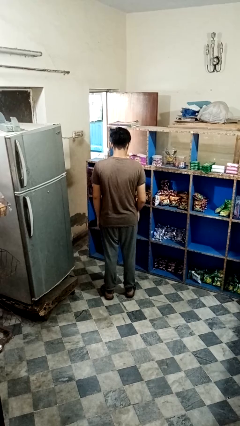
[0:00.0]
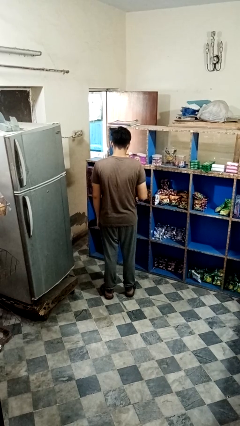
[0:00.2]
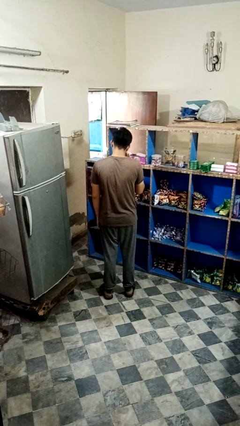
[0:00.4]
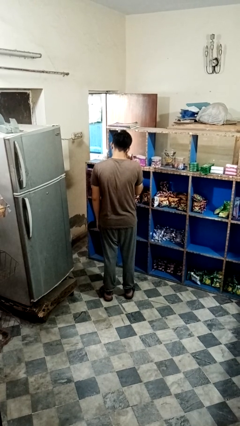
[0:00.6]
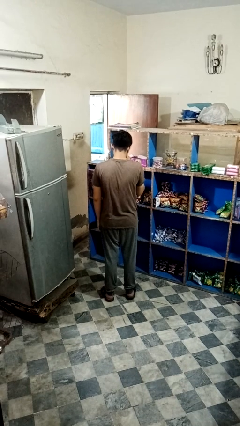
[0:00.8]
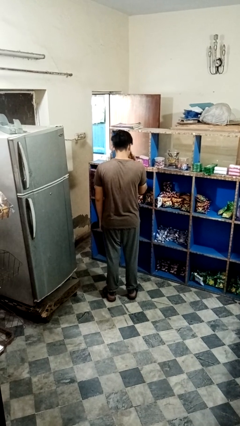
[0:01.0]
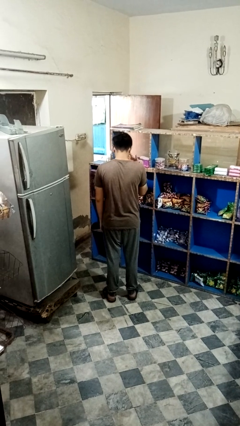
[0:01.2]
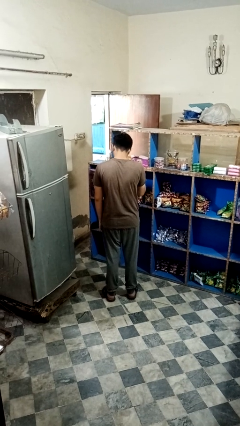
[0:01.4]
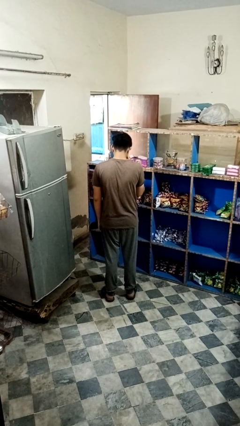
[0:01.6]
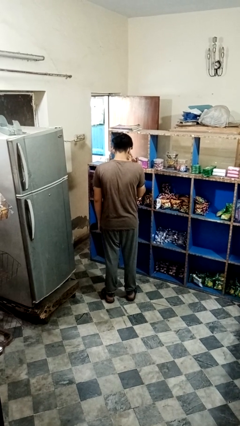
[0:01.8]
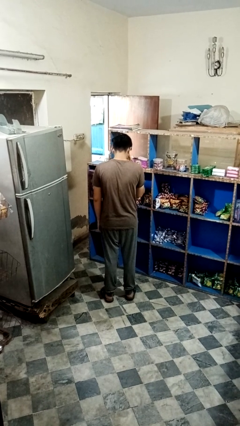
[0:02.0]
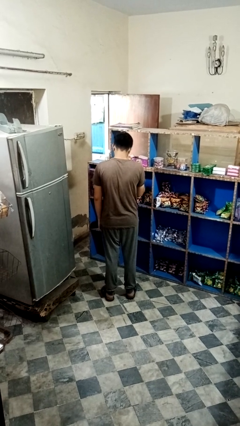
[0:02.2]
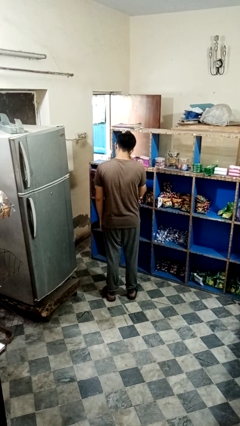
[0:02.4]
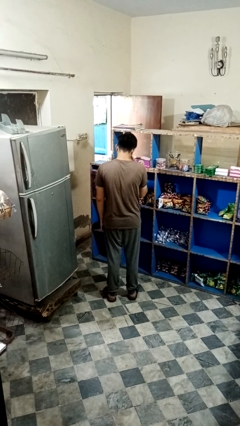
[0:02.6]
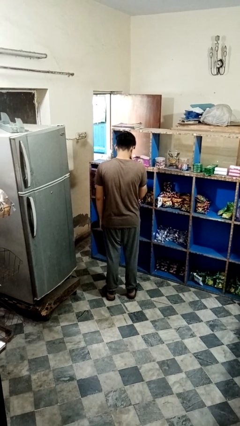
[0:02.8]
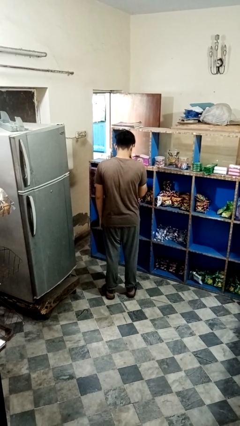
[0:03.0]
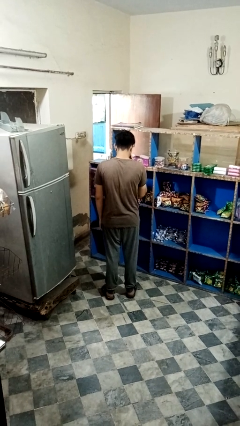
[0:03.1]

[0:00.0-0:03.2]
person rubs eyes

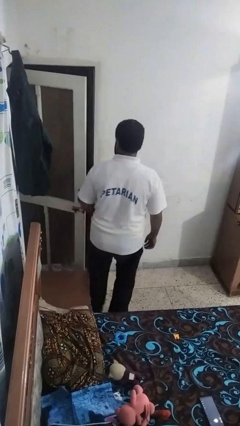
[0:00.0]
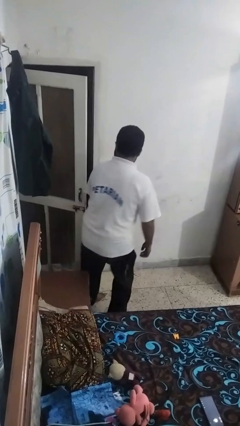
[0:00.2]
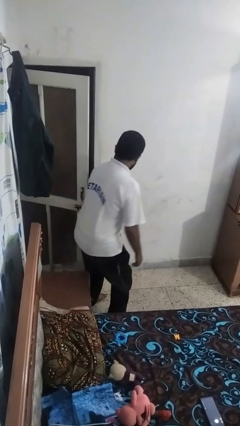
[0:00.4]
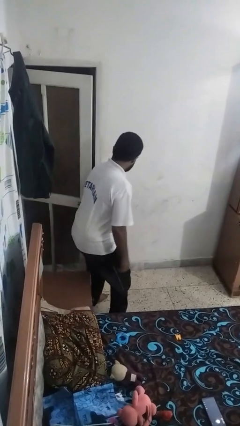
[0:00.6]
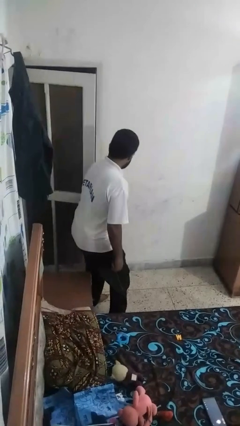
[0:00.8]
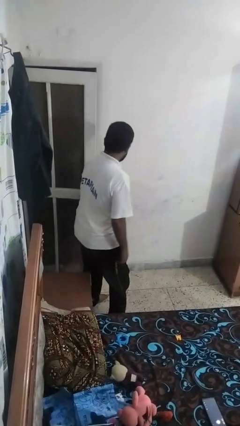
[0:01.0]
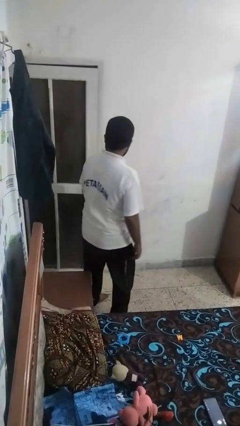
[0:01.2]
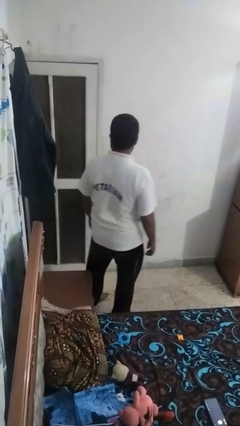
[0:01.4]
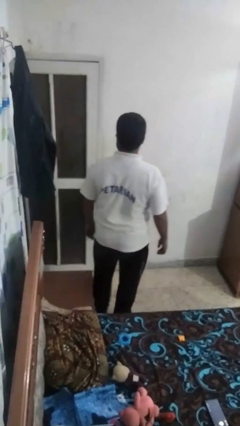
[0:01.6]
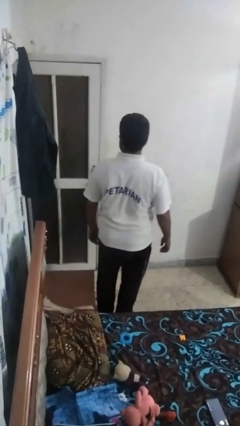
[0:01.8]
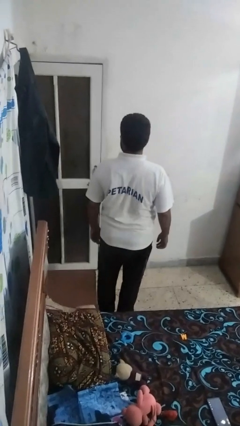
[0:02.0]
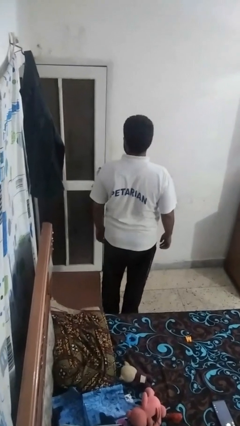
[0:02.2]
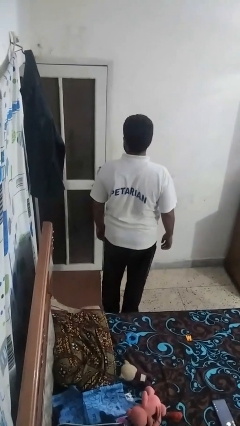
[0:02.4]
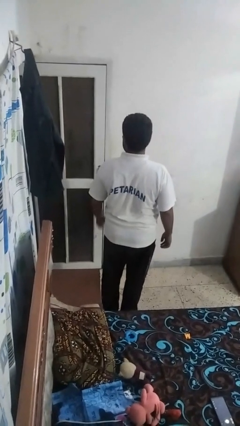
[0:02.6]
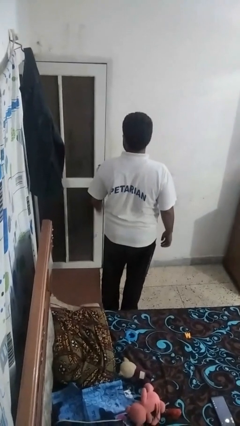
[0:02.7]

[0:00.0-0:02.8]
person closes door with hip

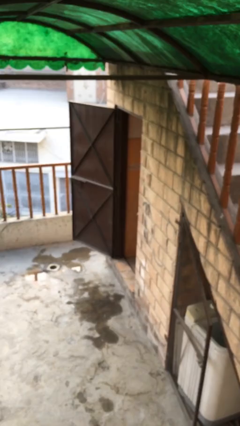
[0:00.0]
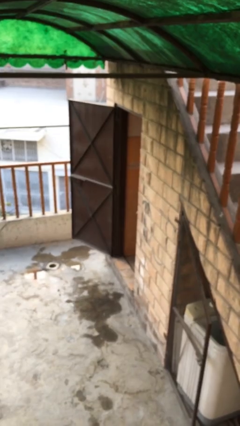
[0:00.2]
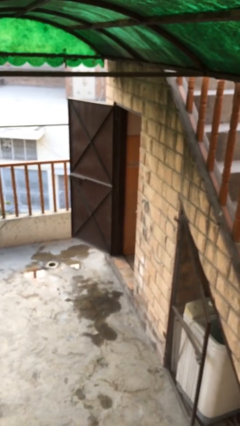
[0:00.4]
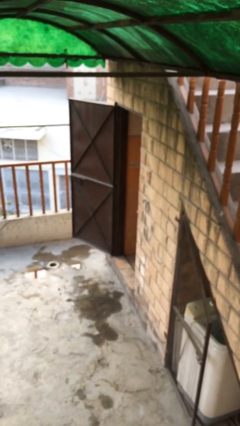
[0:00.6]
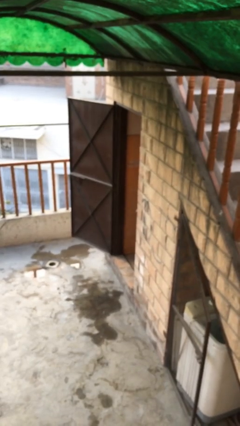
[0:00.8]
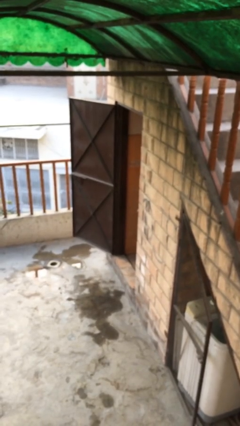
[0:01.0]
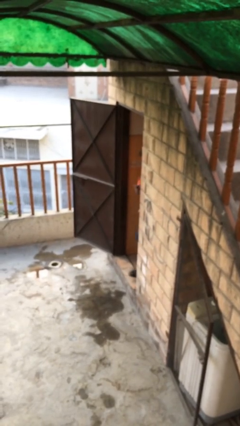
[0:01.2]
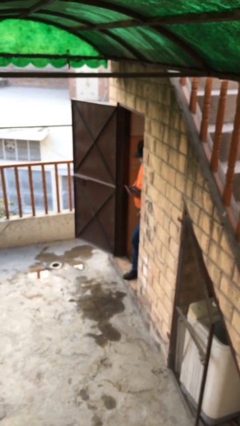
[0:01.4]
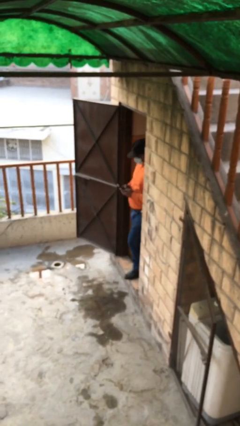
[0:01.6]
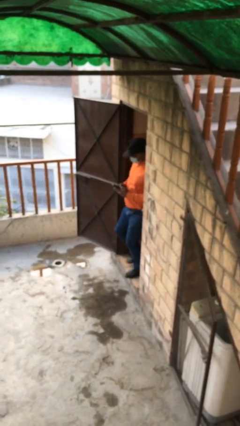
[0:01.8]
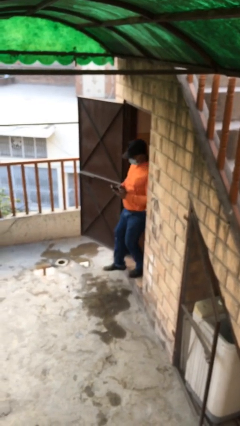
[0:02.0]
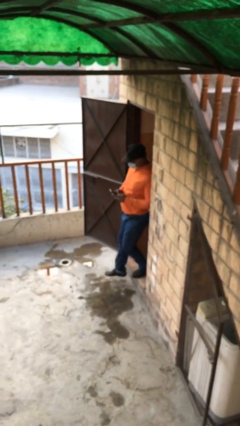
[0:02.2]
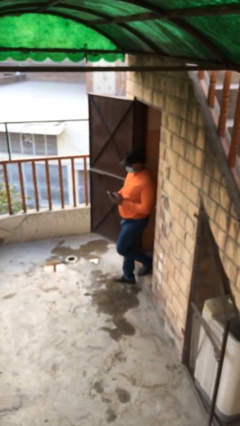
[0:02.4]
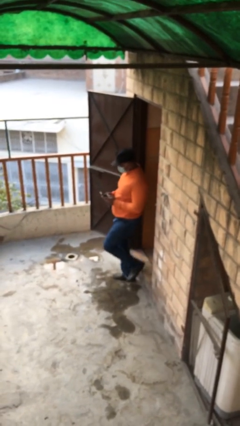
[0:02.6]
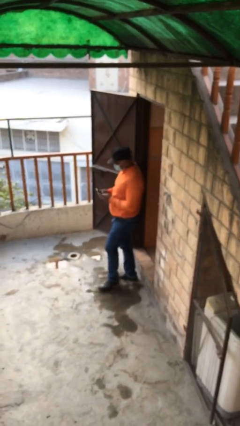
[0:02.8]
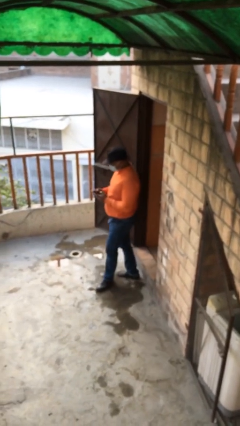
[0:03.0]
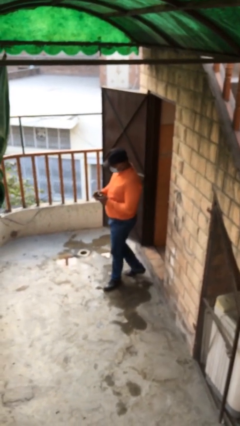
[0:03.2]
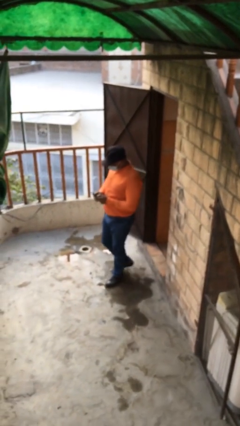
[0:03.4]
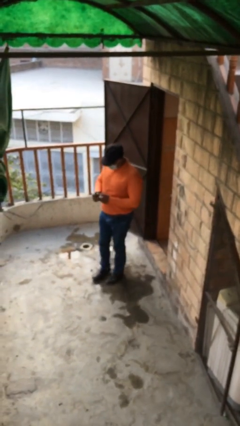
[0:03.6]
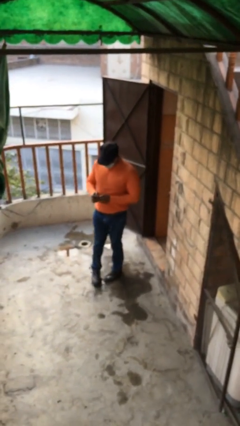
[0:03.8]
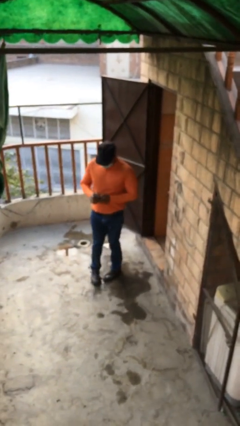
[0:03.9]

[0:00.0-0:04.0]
person exits scene through structure

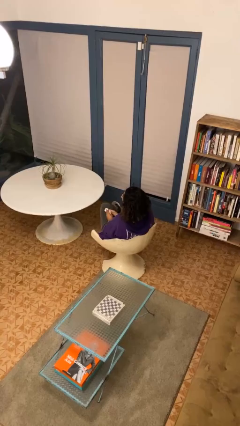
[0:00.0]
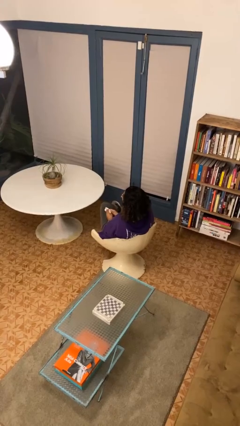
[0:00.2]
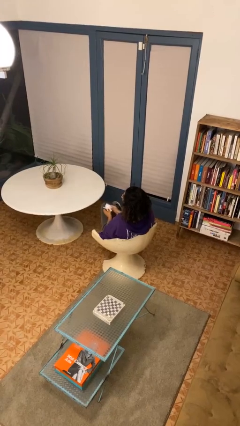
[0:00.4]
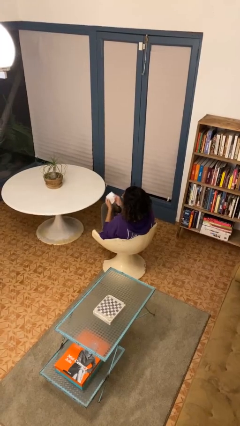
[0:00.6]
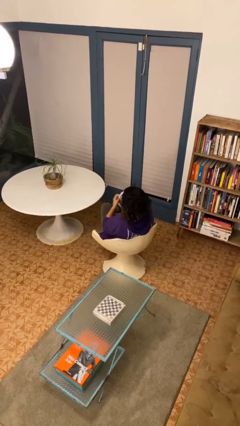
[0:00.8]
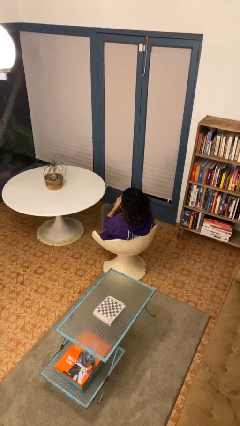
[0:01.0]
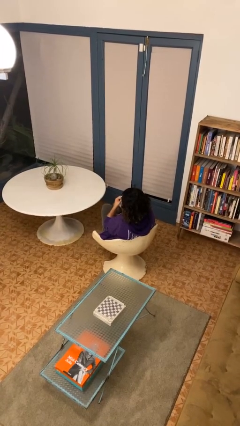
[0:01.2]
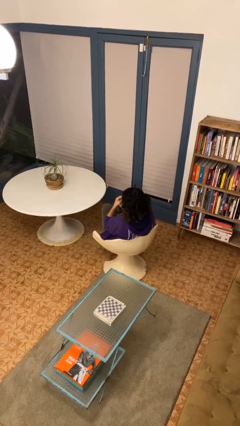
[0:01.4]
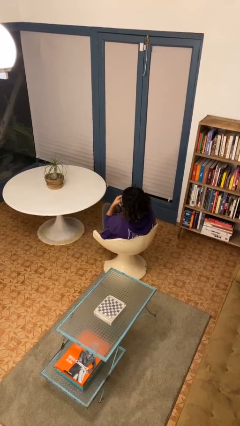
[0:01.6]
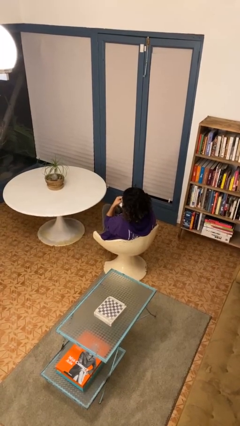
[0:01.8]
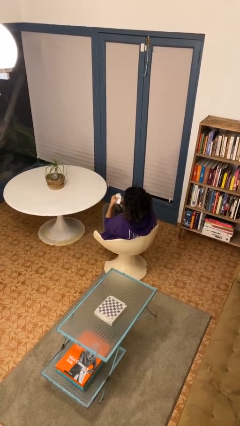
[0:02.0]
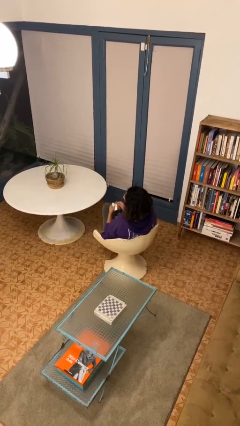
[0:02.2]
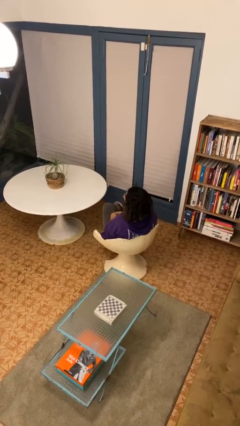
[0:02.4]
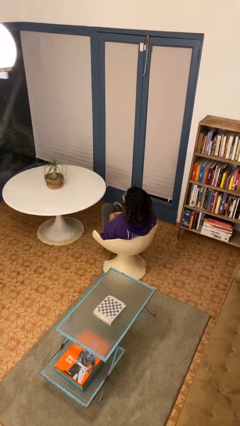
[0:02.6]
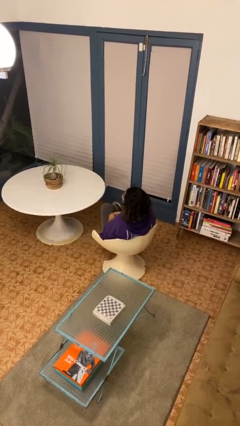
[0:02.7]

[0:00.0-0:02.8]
person blows nose

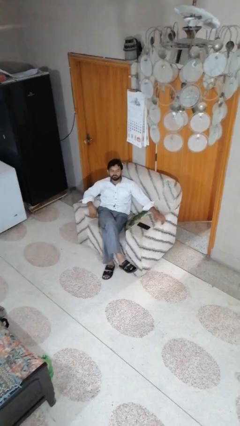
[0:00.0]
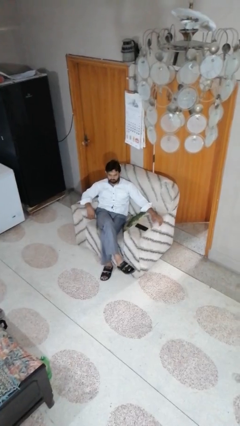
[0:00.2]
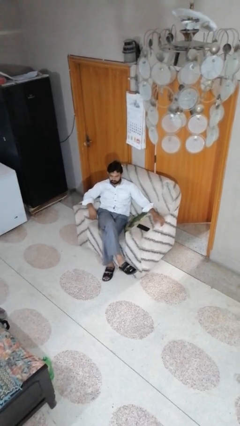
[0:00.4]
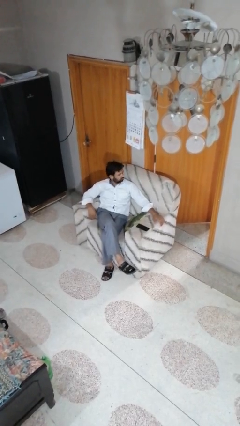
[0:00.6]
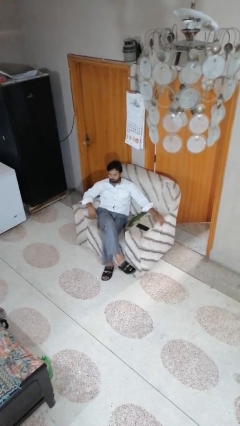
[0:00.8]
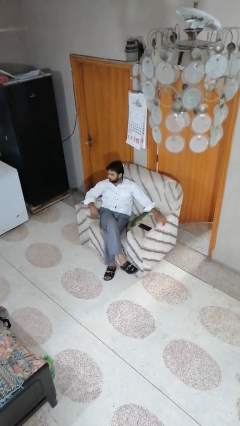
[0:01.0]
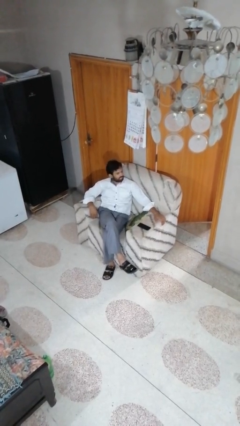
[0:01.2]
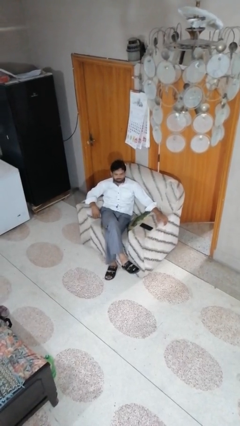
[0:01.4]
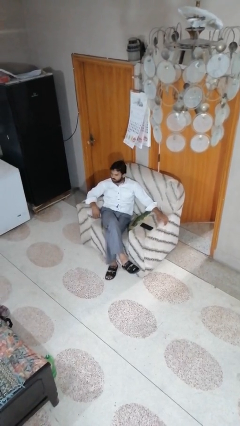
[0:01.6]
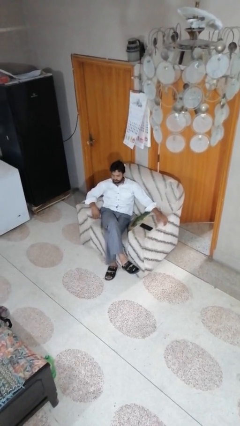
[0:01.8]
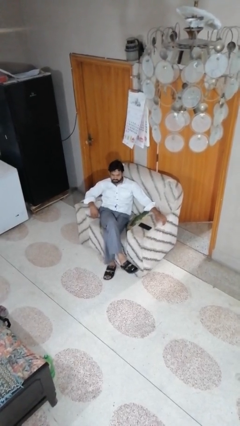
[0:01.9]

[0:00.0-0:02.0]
person shakes head

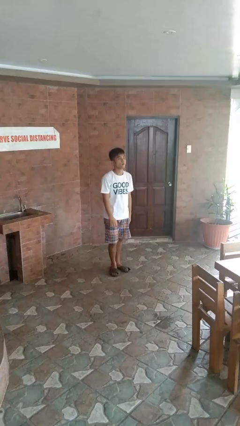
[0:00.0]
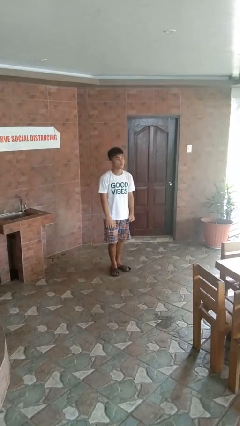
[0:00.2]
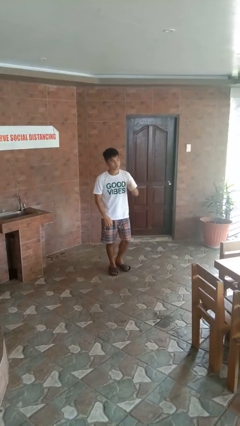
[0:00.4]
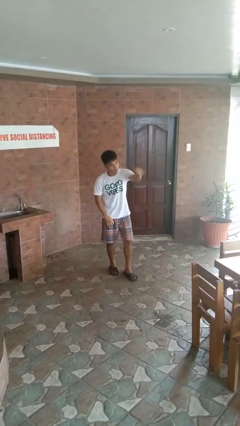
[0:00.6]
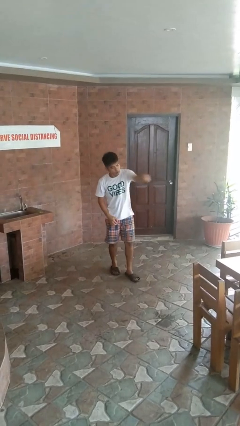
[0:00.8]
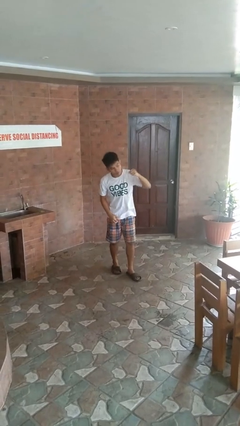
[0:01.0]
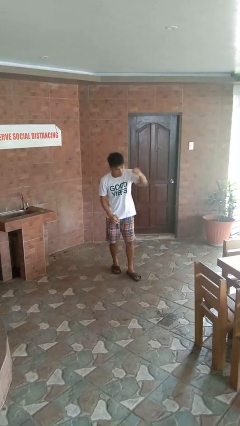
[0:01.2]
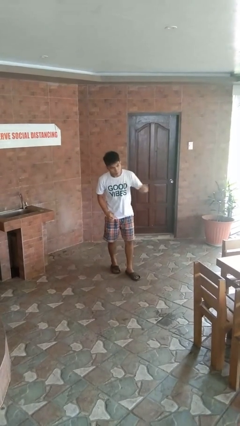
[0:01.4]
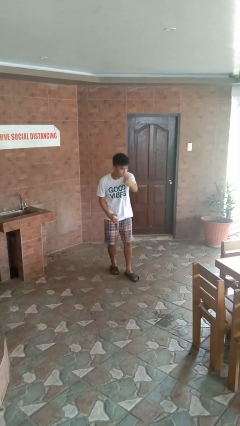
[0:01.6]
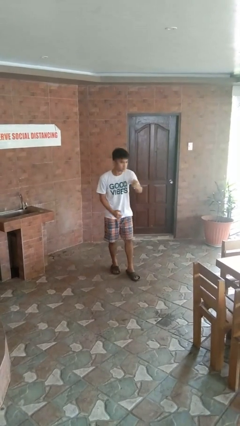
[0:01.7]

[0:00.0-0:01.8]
person punches

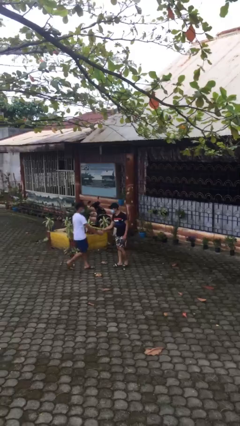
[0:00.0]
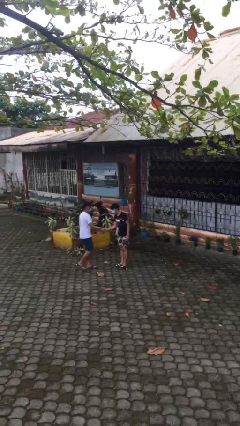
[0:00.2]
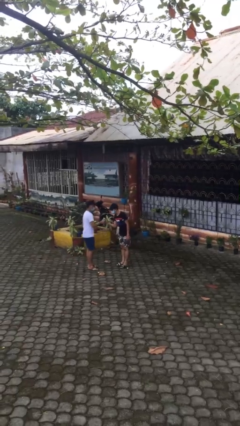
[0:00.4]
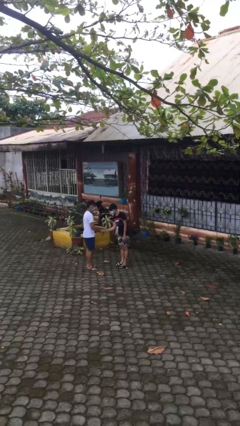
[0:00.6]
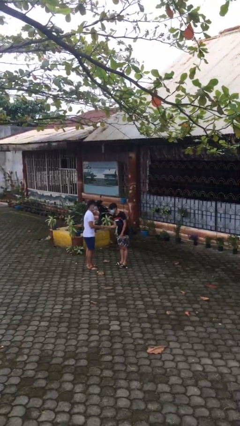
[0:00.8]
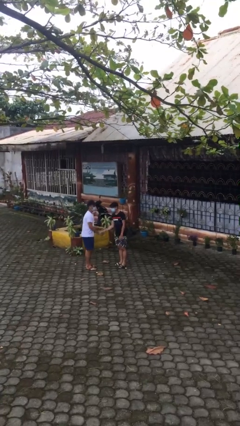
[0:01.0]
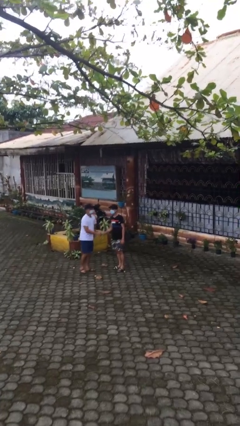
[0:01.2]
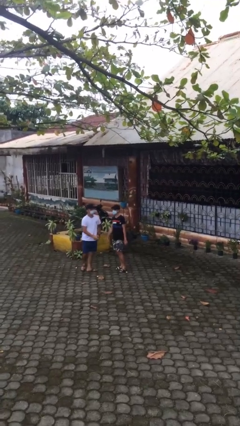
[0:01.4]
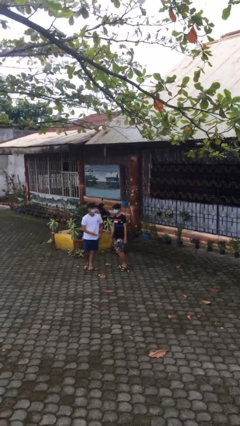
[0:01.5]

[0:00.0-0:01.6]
person shakes hand
